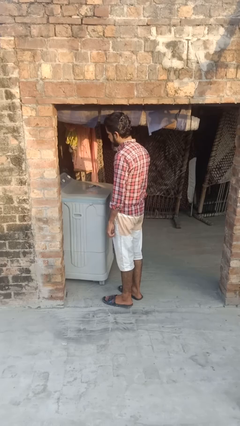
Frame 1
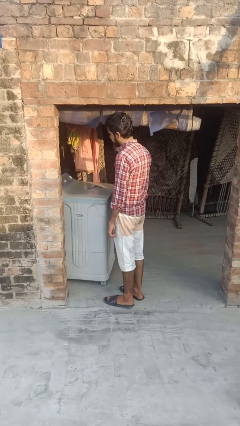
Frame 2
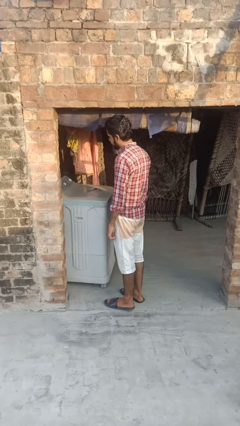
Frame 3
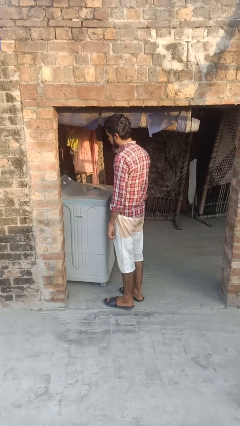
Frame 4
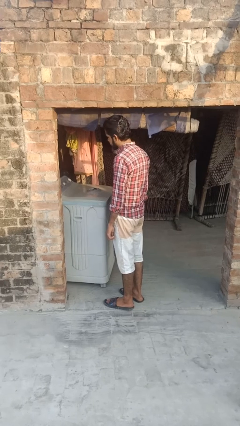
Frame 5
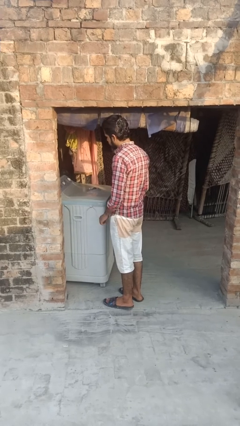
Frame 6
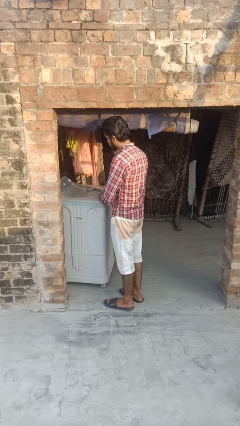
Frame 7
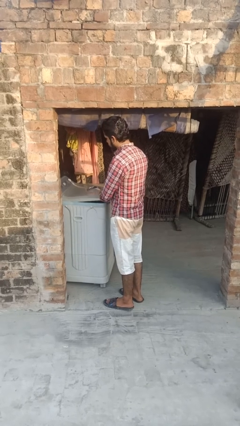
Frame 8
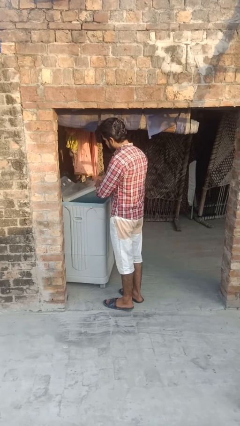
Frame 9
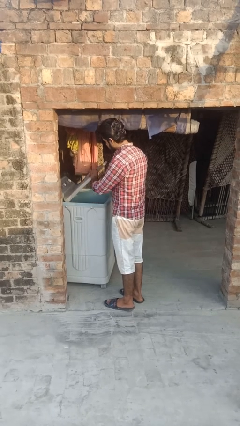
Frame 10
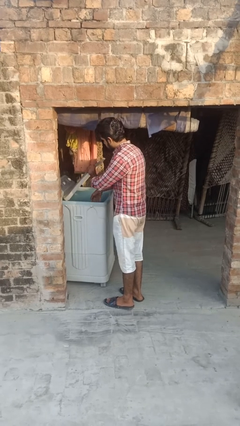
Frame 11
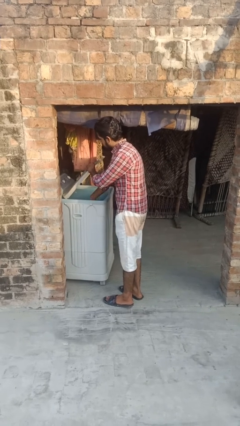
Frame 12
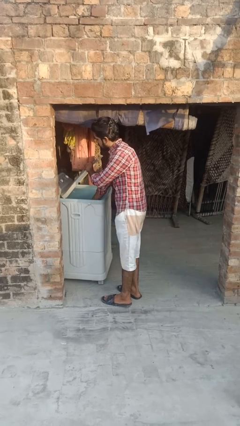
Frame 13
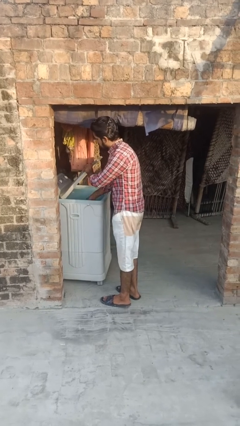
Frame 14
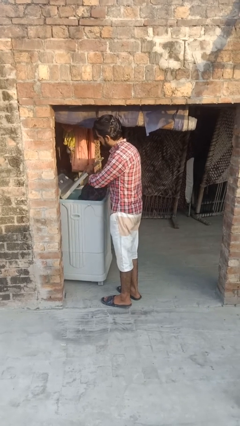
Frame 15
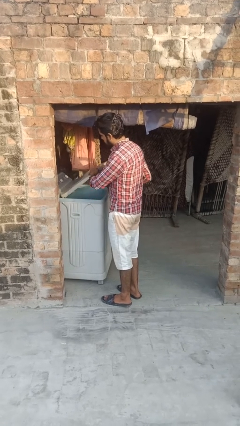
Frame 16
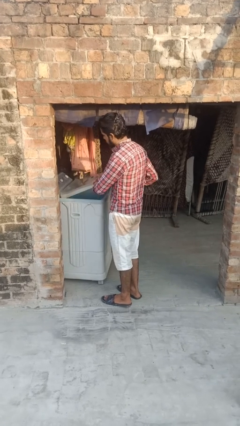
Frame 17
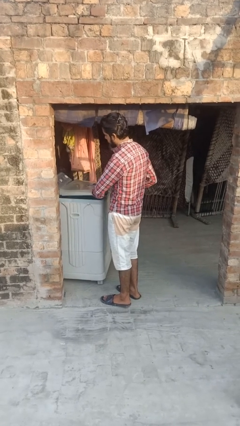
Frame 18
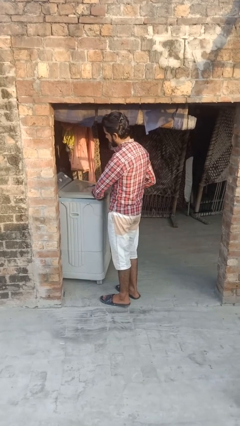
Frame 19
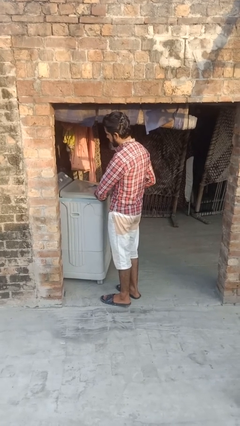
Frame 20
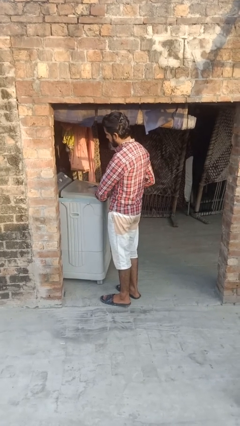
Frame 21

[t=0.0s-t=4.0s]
person unloads clotheswasher

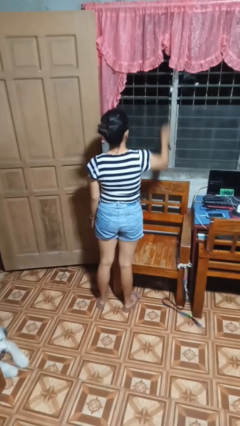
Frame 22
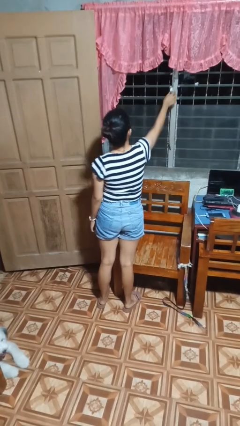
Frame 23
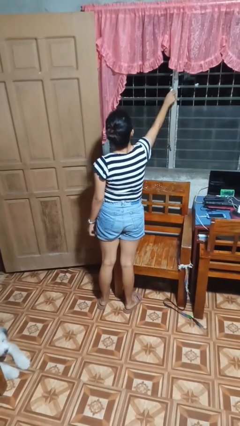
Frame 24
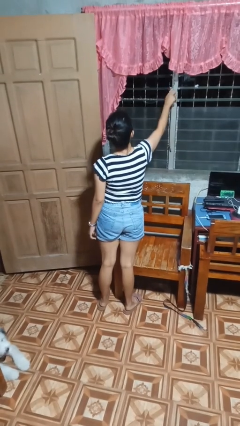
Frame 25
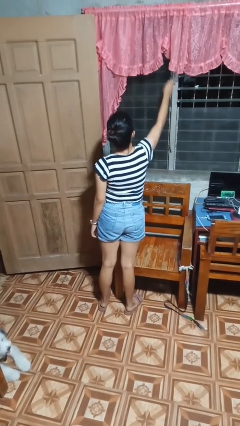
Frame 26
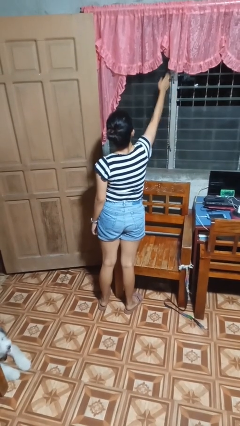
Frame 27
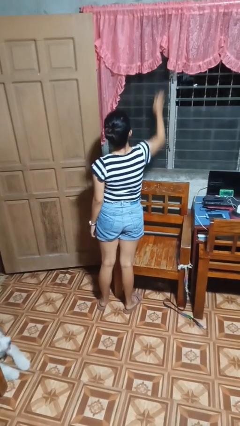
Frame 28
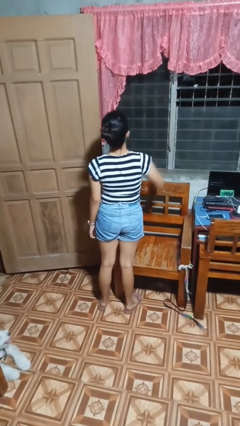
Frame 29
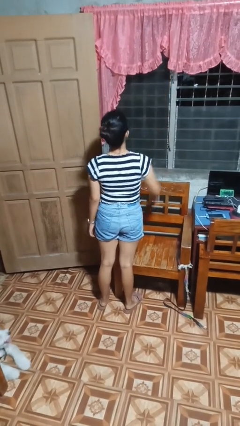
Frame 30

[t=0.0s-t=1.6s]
person closes home window

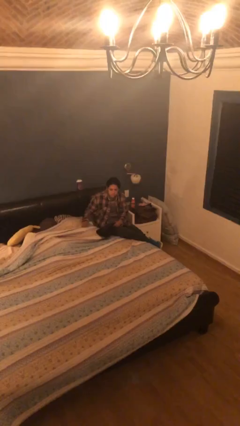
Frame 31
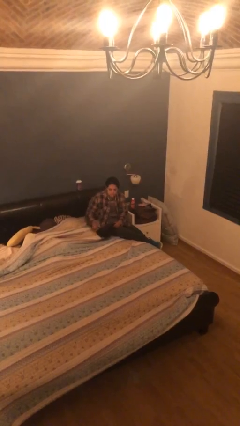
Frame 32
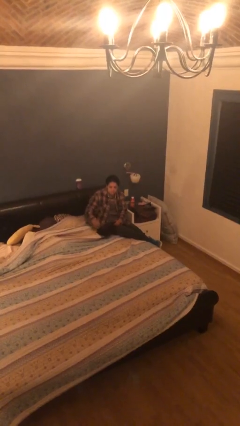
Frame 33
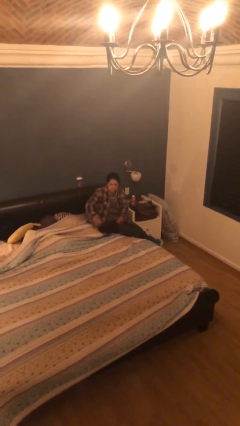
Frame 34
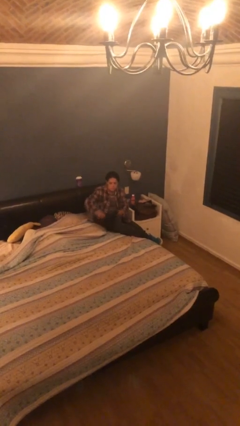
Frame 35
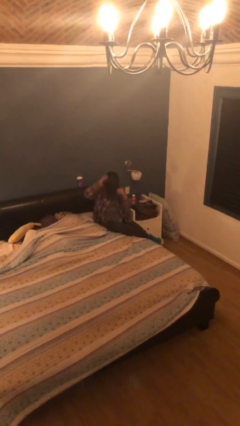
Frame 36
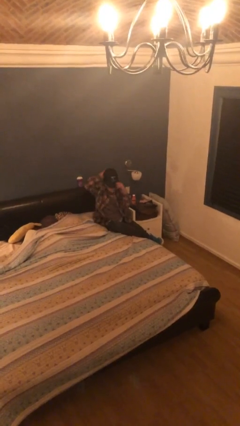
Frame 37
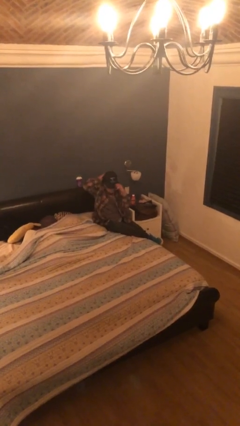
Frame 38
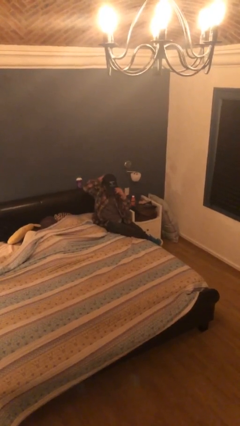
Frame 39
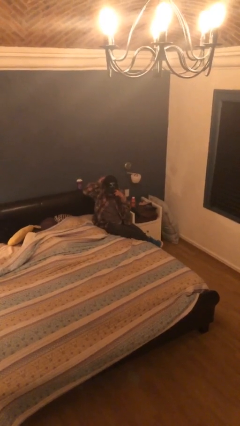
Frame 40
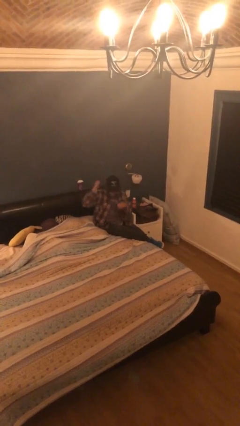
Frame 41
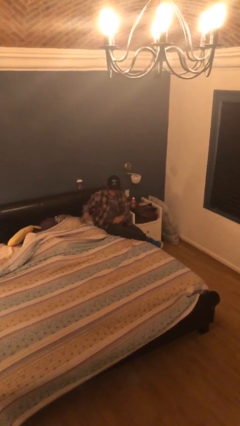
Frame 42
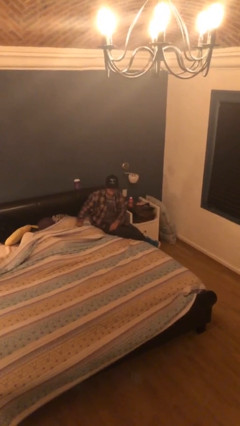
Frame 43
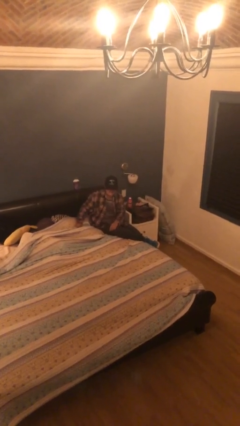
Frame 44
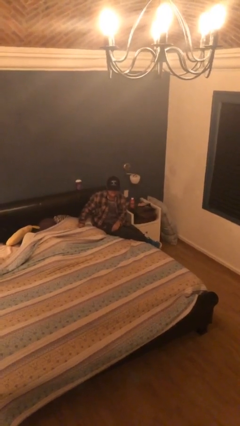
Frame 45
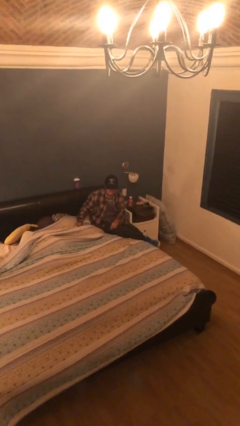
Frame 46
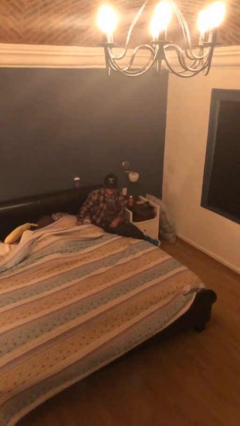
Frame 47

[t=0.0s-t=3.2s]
person puts on hat

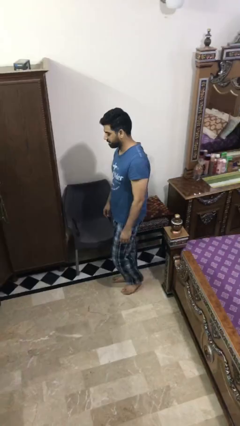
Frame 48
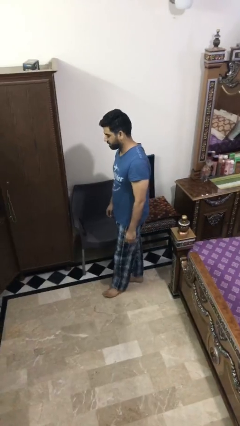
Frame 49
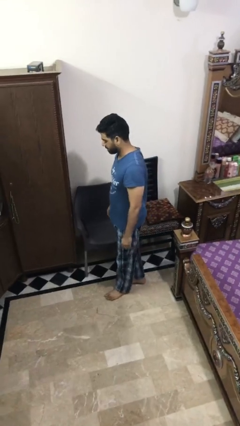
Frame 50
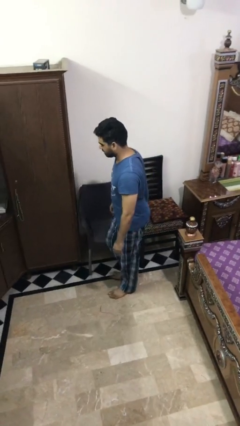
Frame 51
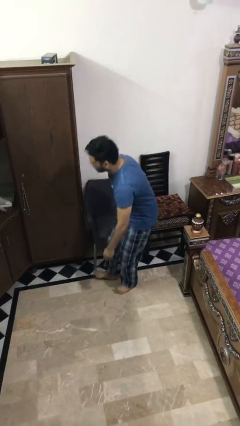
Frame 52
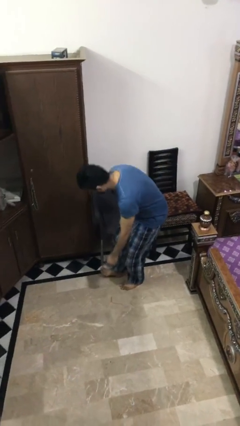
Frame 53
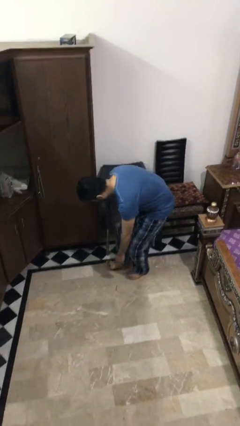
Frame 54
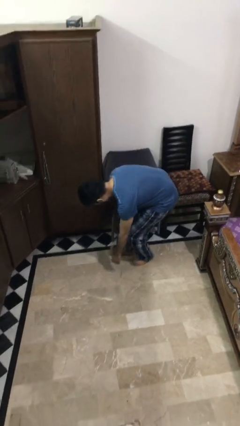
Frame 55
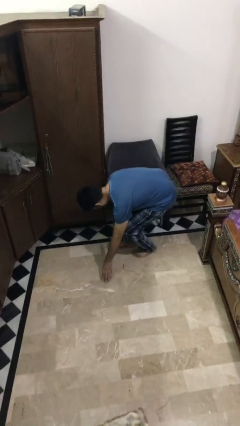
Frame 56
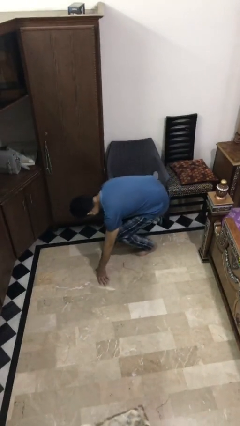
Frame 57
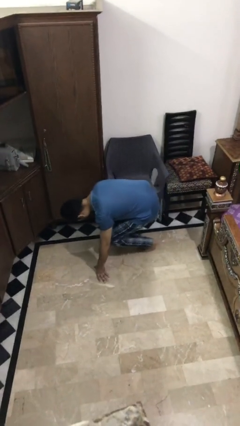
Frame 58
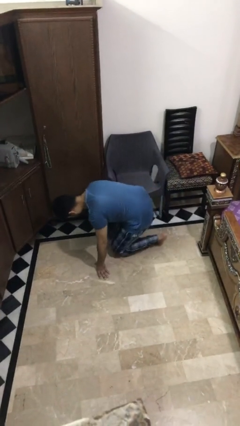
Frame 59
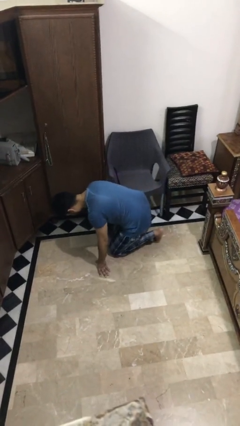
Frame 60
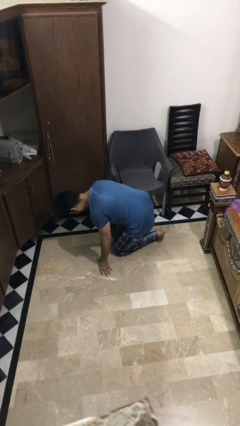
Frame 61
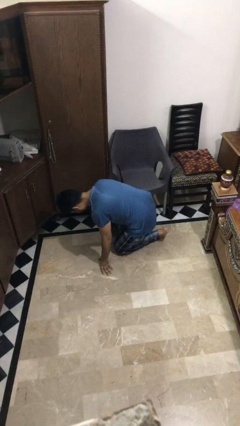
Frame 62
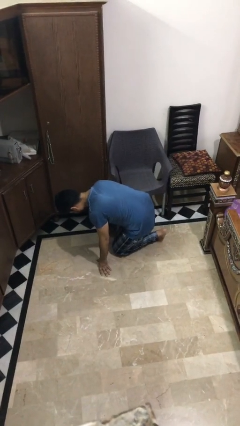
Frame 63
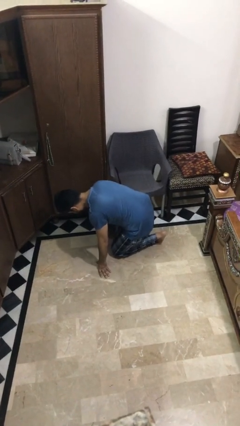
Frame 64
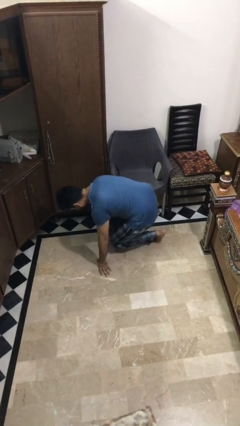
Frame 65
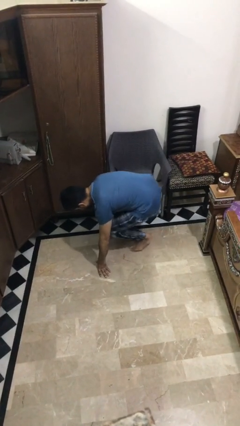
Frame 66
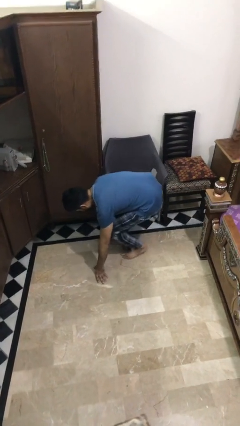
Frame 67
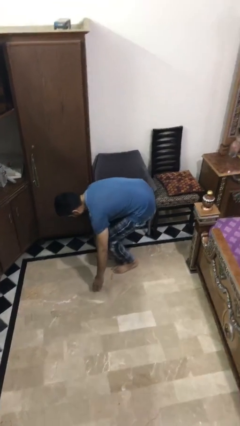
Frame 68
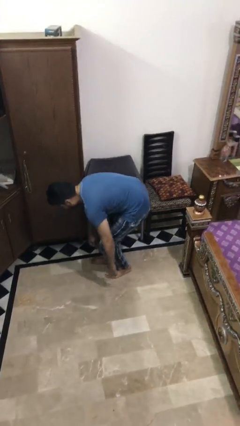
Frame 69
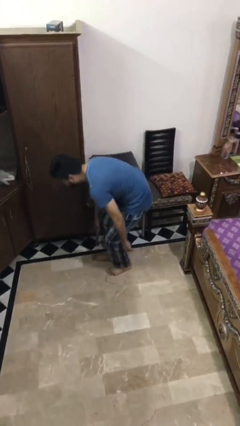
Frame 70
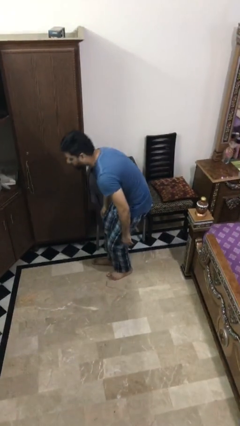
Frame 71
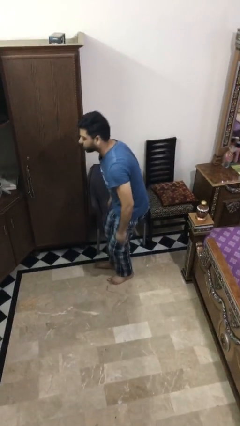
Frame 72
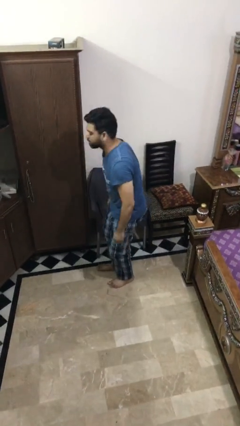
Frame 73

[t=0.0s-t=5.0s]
person stubs toe

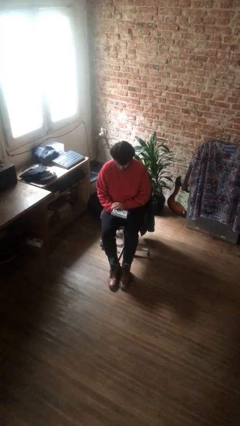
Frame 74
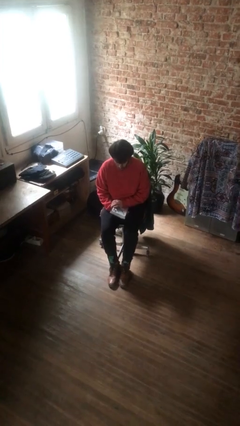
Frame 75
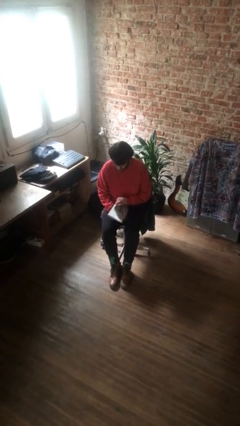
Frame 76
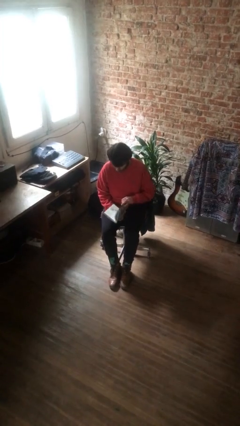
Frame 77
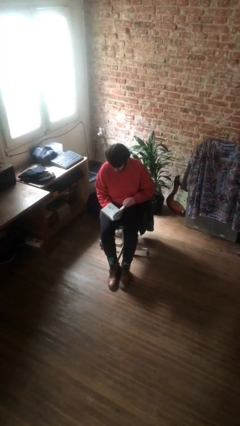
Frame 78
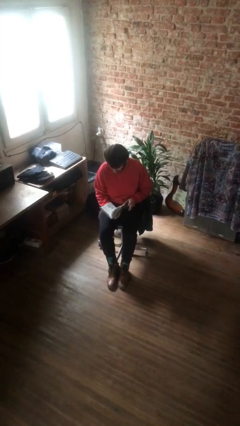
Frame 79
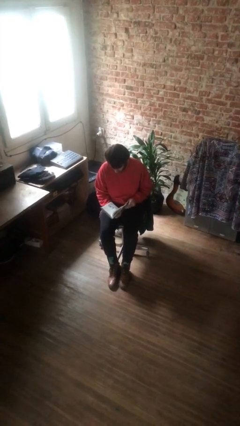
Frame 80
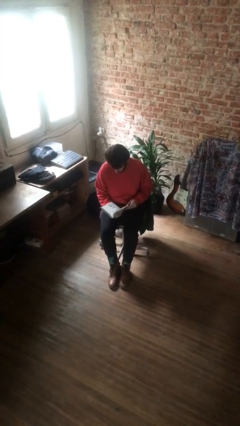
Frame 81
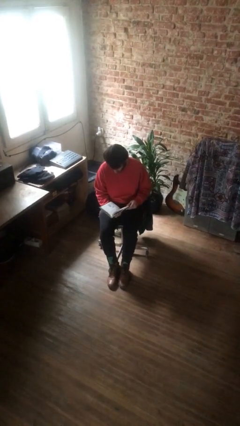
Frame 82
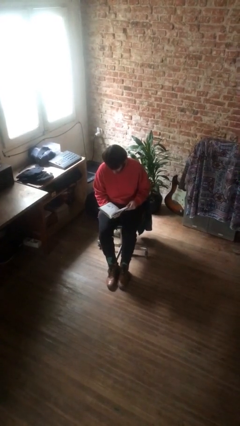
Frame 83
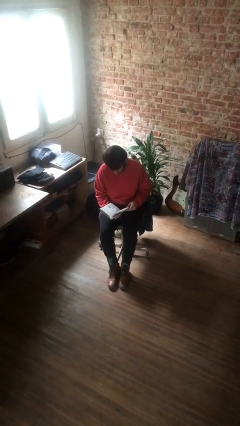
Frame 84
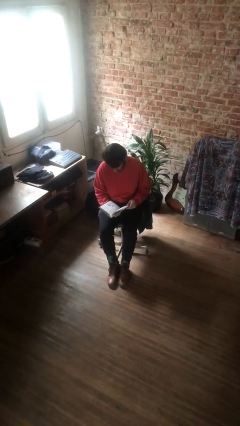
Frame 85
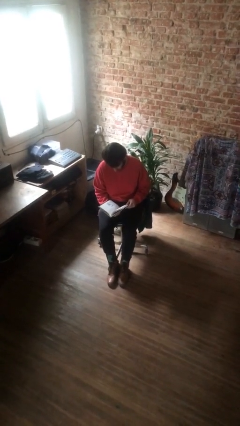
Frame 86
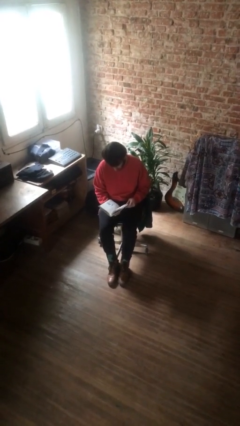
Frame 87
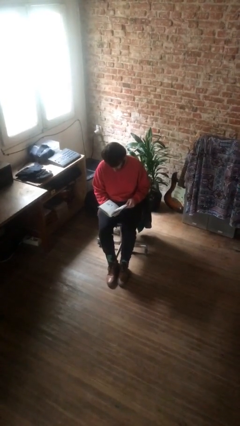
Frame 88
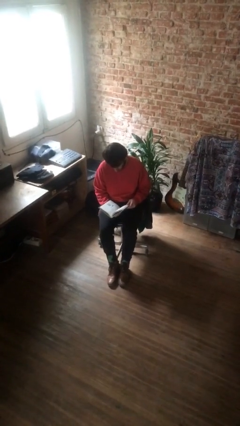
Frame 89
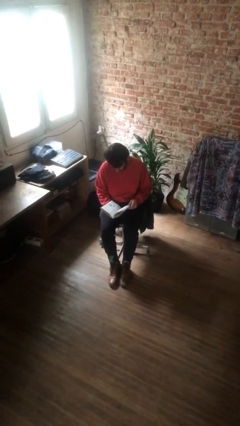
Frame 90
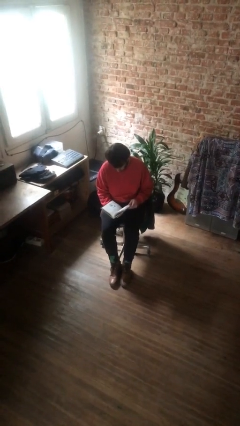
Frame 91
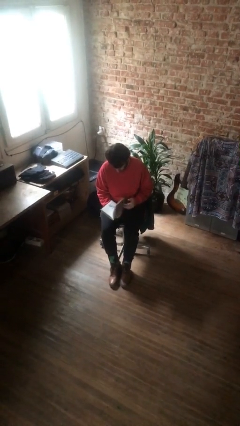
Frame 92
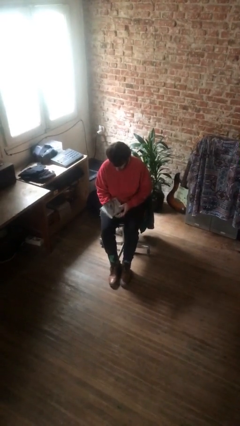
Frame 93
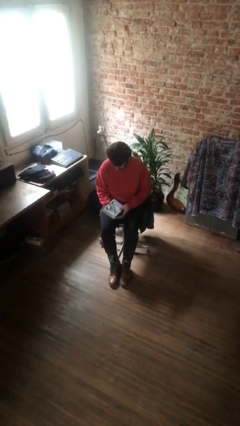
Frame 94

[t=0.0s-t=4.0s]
person reads book
